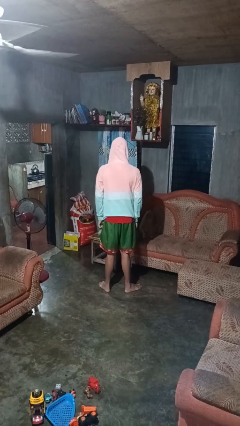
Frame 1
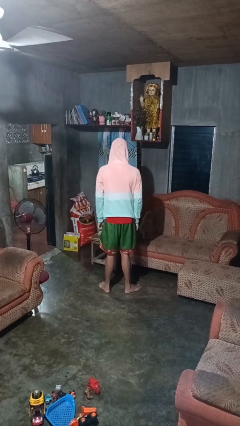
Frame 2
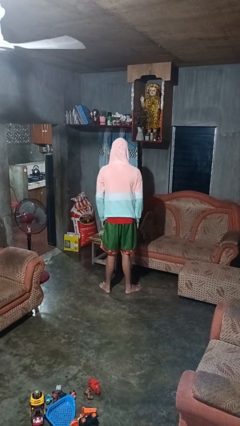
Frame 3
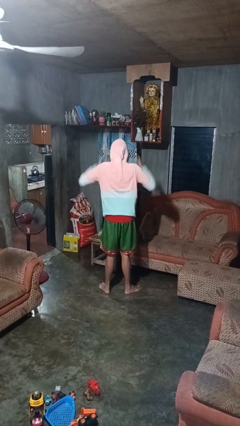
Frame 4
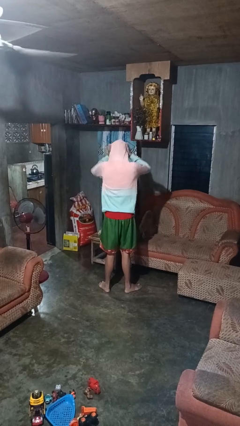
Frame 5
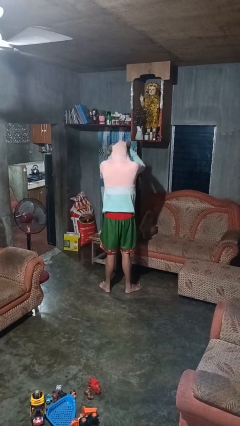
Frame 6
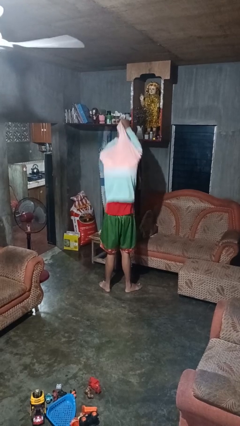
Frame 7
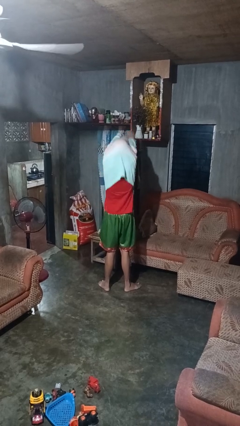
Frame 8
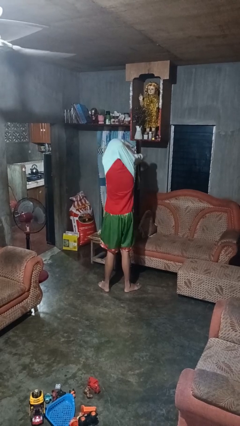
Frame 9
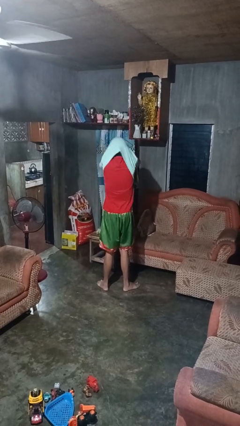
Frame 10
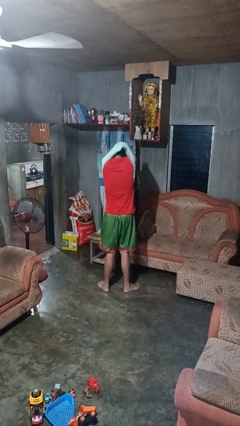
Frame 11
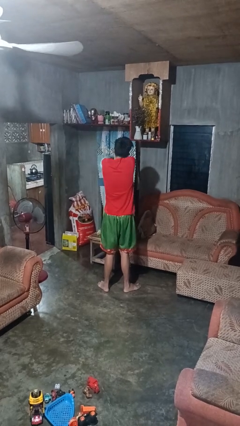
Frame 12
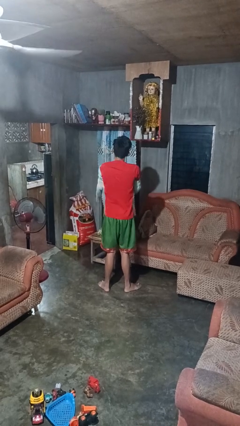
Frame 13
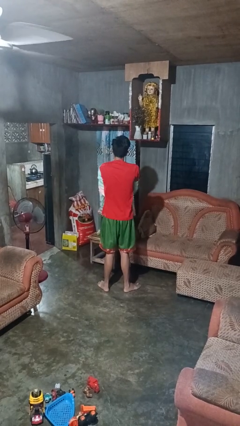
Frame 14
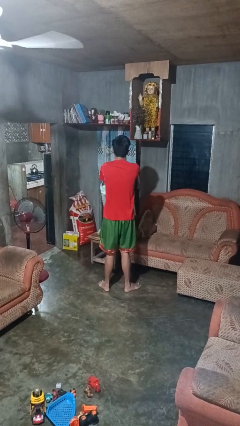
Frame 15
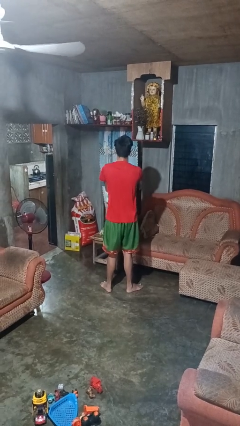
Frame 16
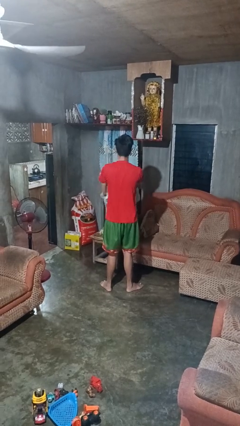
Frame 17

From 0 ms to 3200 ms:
person takes off hoodie

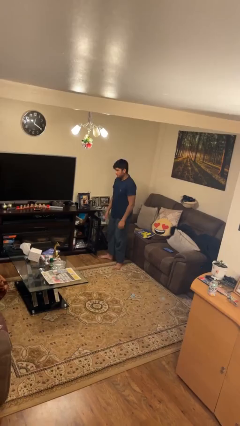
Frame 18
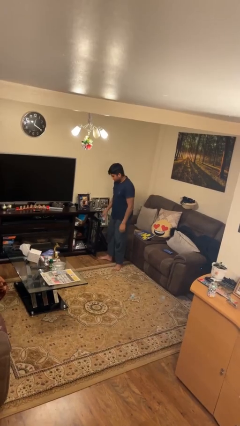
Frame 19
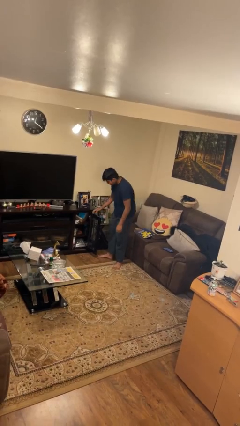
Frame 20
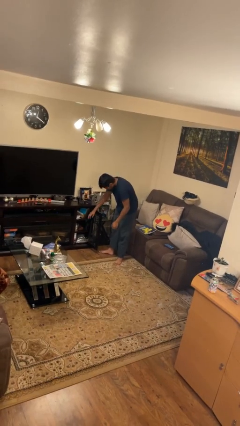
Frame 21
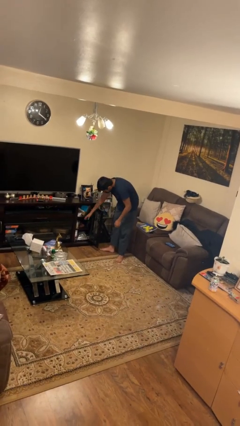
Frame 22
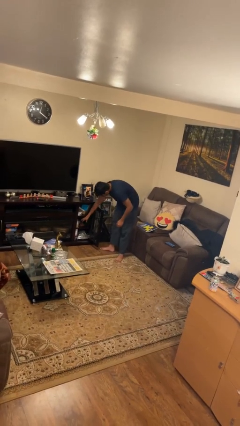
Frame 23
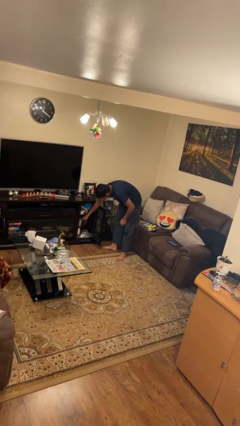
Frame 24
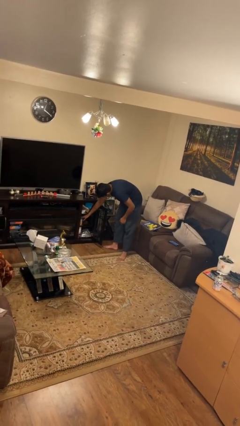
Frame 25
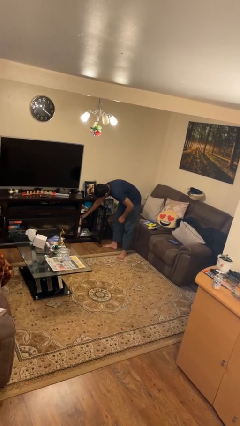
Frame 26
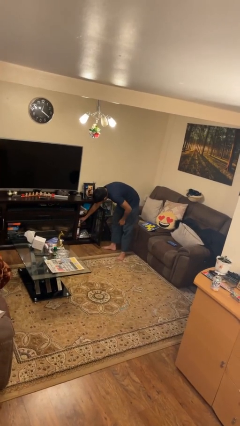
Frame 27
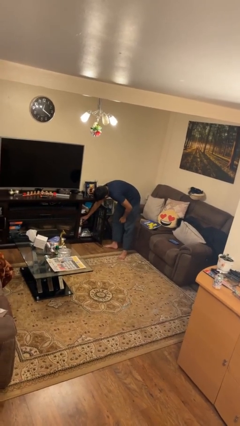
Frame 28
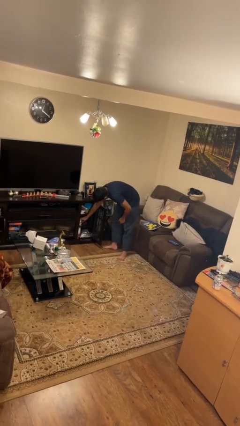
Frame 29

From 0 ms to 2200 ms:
person searches in cabinet

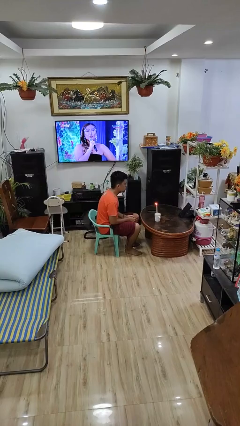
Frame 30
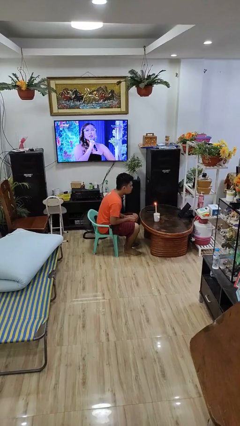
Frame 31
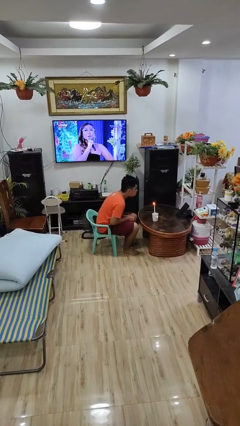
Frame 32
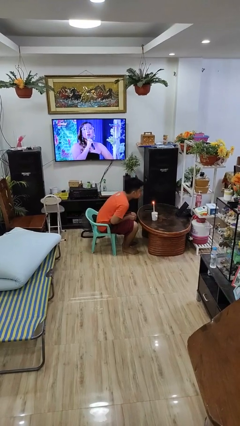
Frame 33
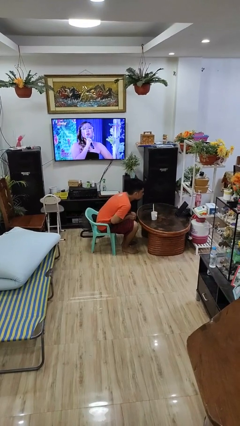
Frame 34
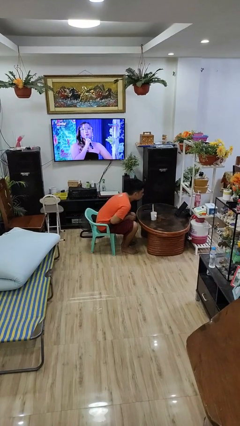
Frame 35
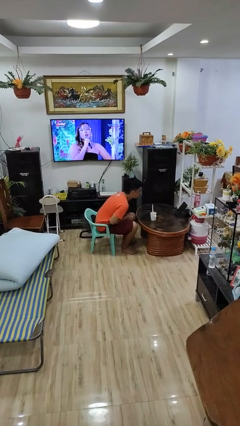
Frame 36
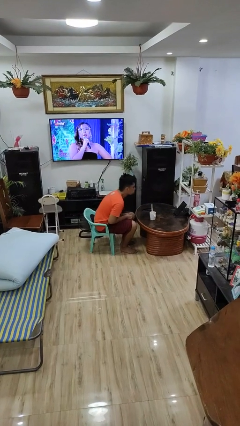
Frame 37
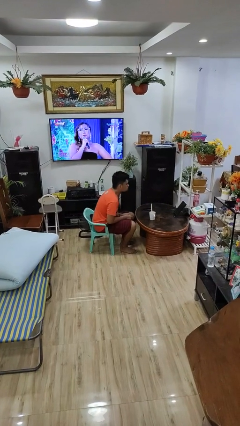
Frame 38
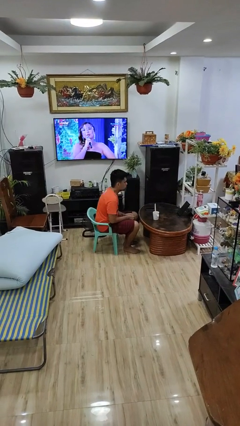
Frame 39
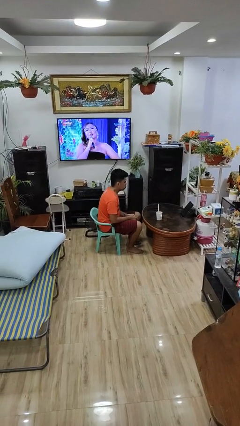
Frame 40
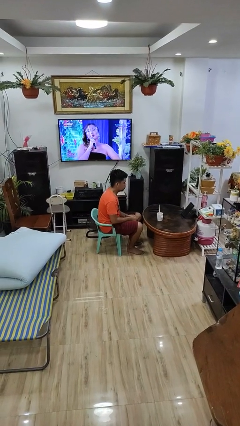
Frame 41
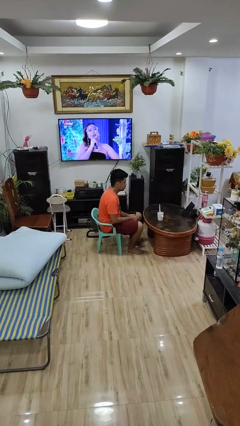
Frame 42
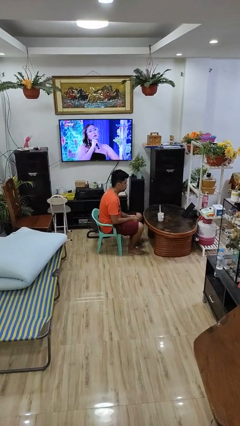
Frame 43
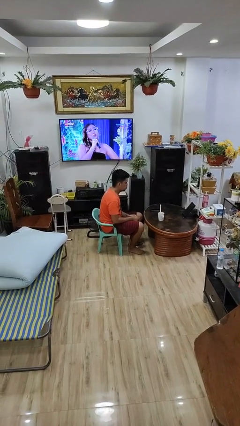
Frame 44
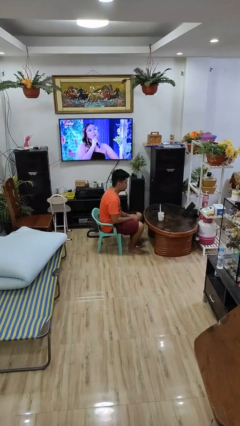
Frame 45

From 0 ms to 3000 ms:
person extinguishes candle

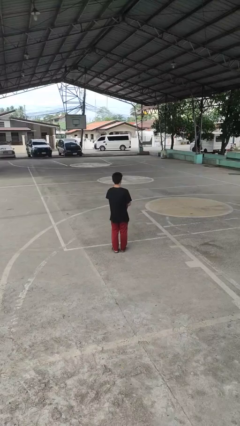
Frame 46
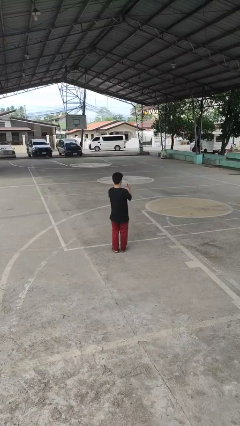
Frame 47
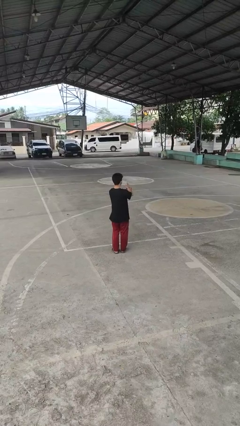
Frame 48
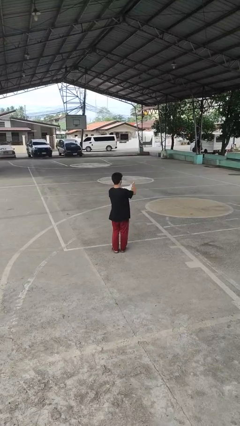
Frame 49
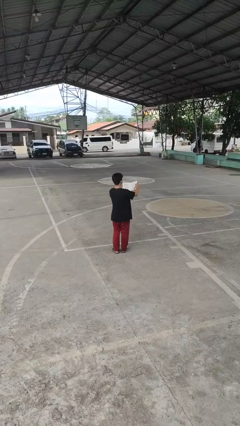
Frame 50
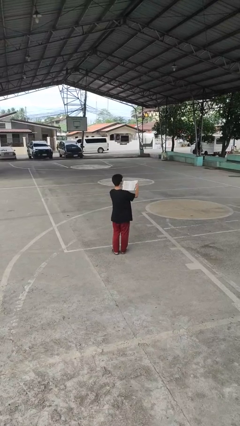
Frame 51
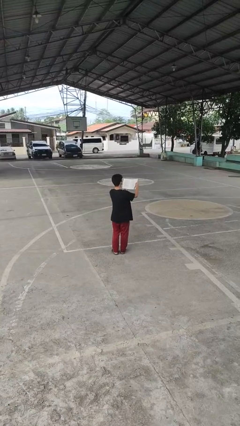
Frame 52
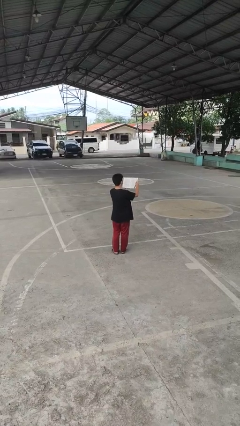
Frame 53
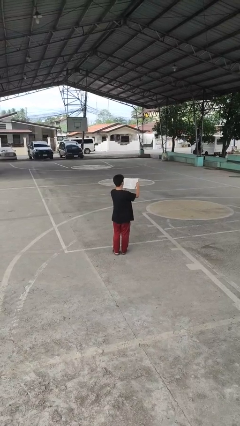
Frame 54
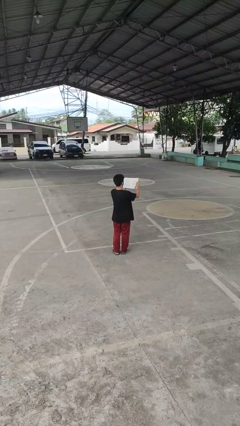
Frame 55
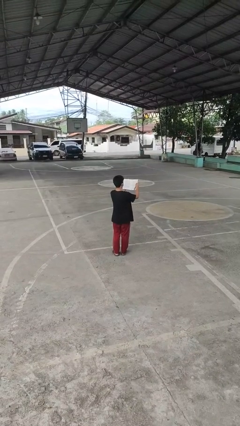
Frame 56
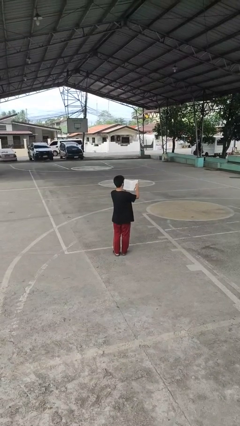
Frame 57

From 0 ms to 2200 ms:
person reads book

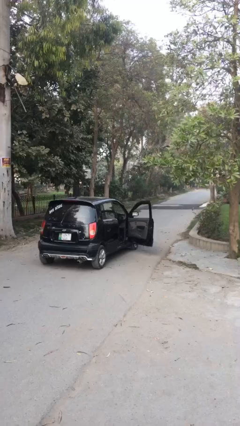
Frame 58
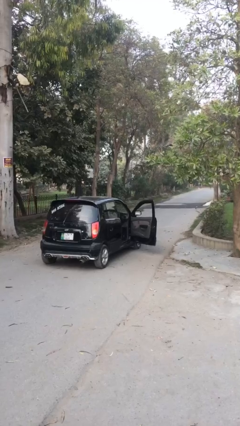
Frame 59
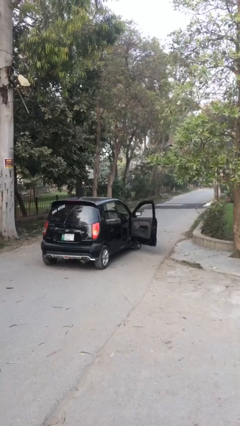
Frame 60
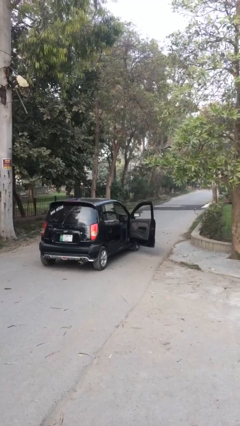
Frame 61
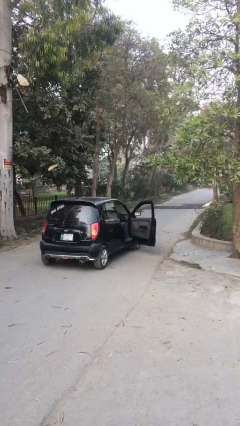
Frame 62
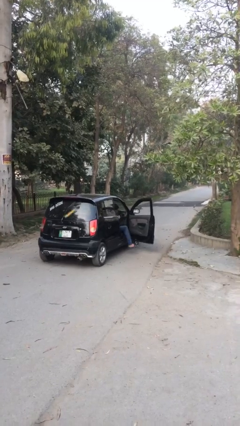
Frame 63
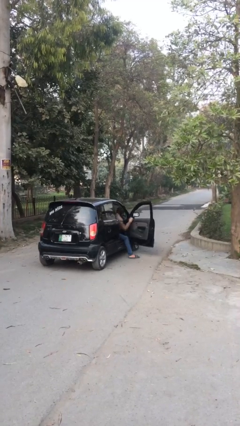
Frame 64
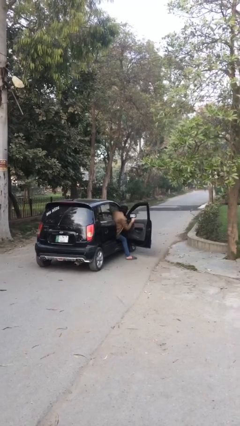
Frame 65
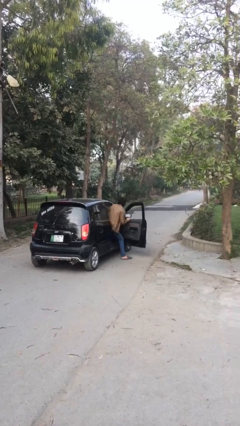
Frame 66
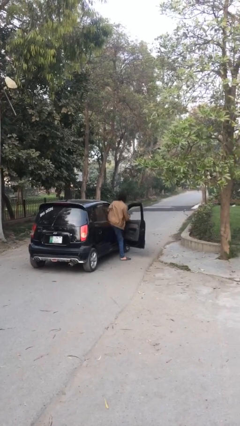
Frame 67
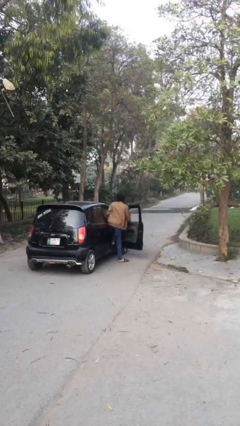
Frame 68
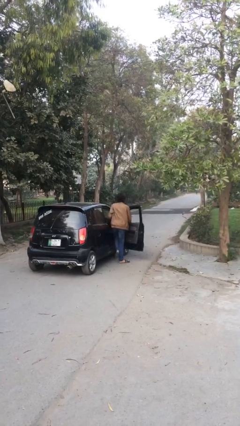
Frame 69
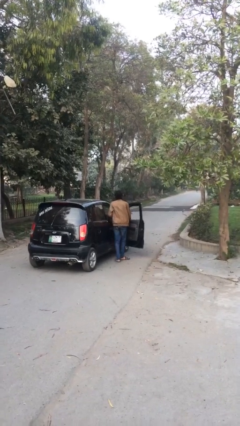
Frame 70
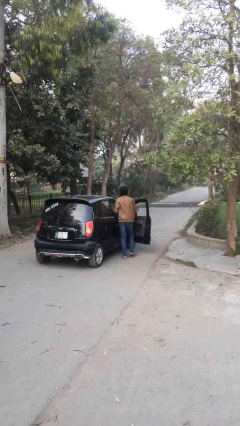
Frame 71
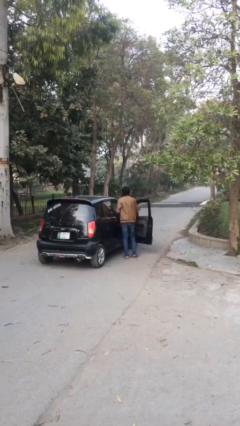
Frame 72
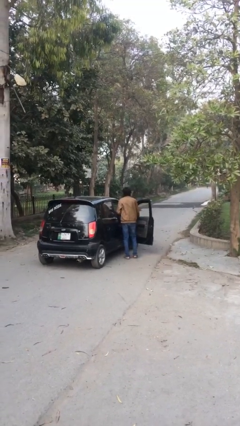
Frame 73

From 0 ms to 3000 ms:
person exits car

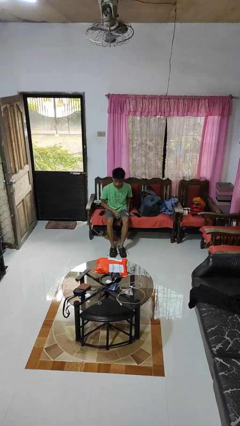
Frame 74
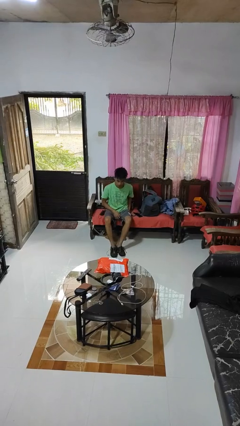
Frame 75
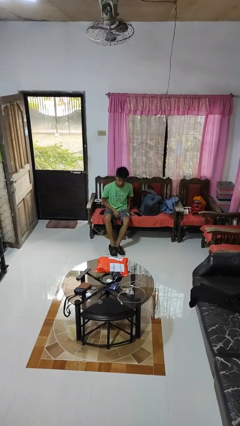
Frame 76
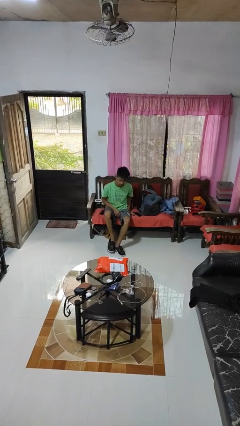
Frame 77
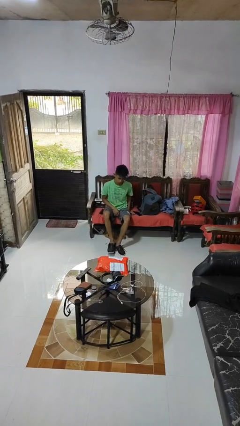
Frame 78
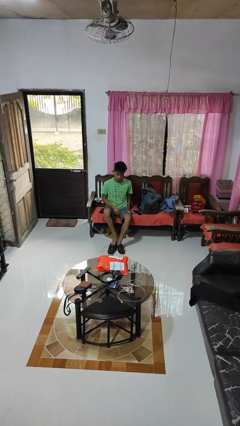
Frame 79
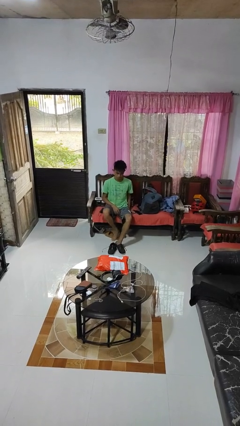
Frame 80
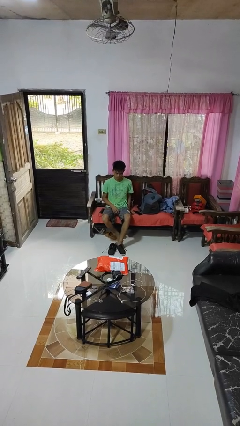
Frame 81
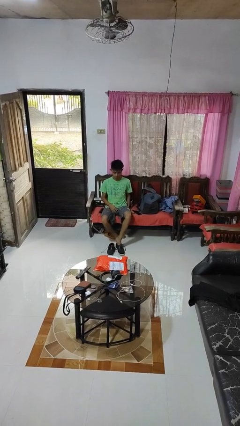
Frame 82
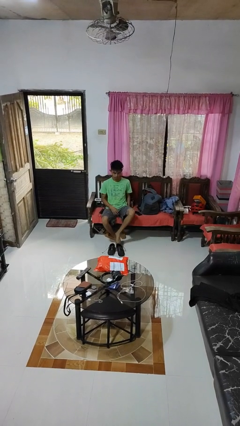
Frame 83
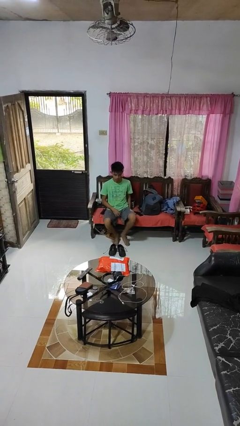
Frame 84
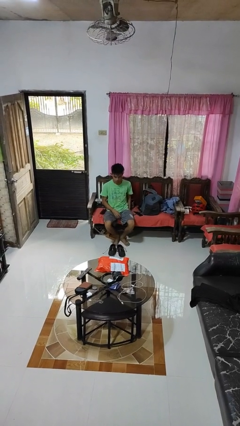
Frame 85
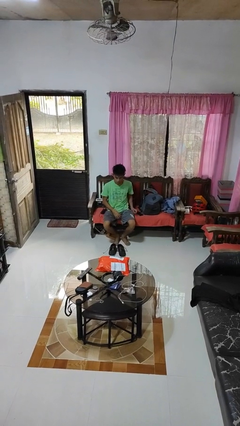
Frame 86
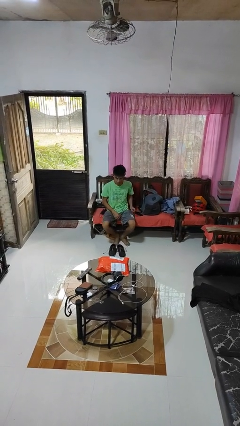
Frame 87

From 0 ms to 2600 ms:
person takes off shoes

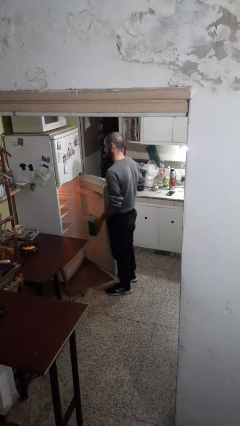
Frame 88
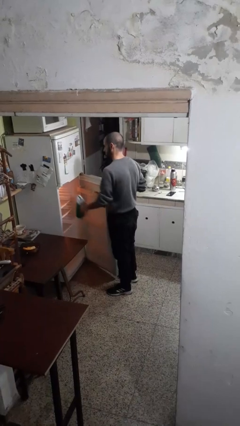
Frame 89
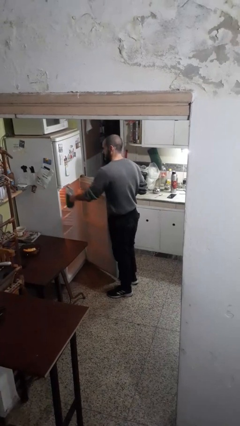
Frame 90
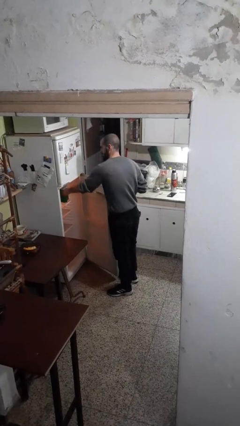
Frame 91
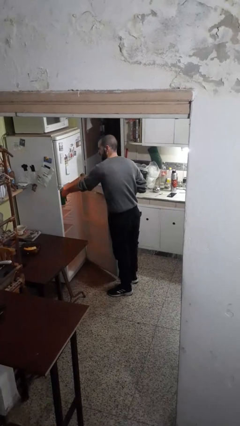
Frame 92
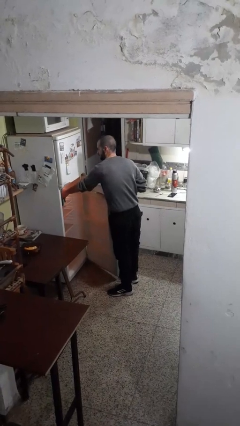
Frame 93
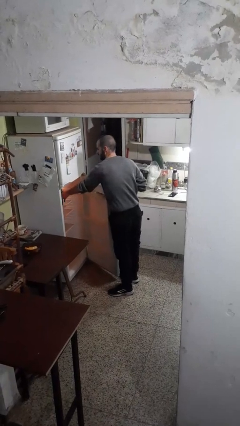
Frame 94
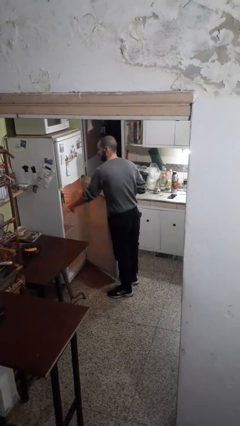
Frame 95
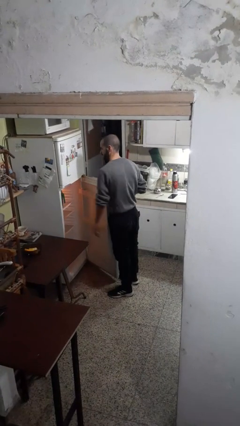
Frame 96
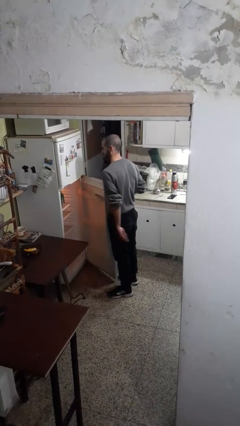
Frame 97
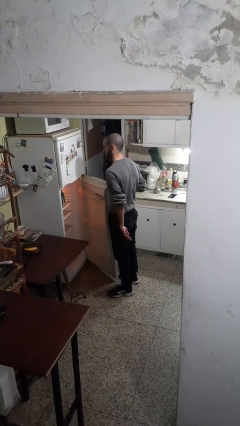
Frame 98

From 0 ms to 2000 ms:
person puts object into refrigerator
